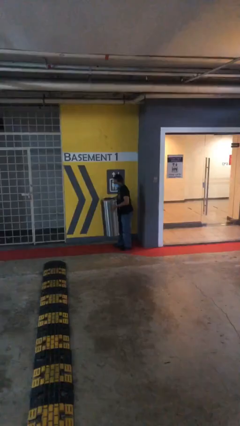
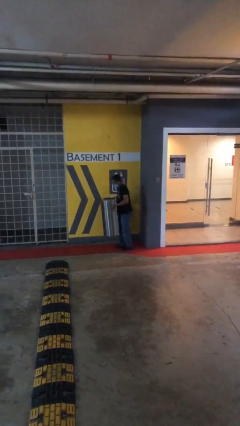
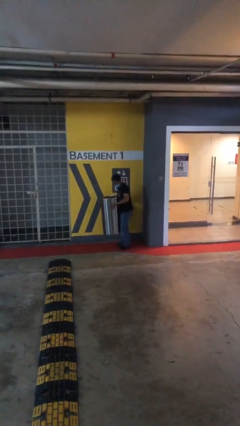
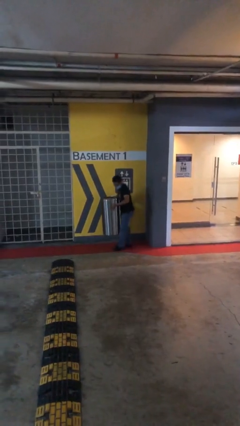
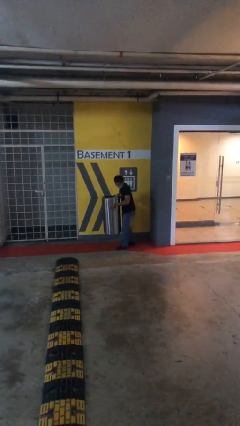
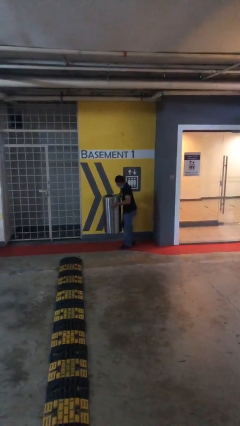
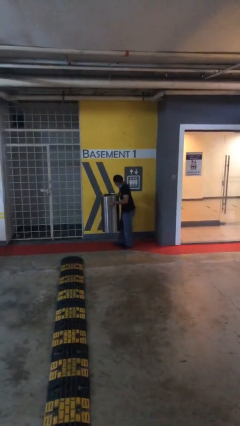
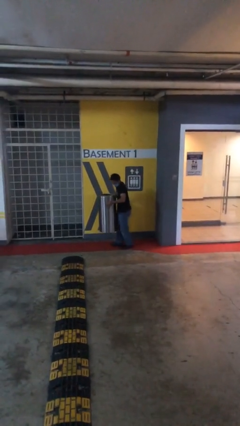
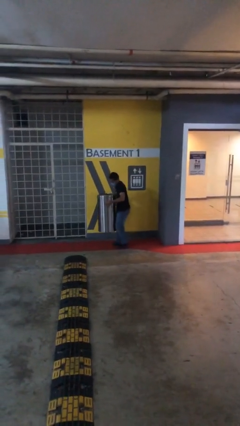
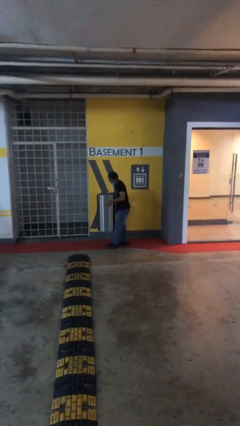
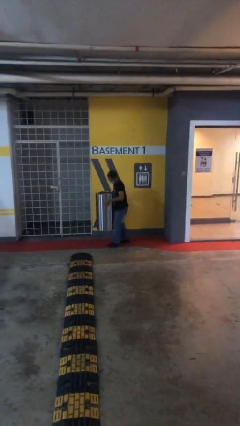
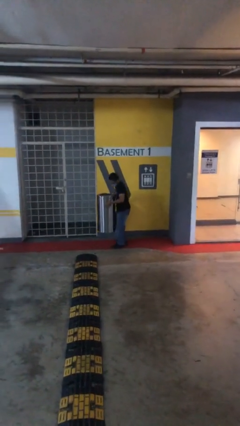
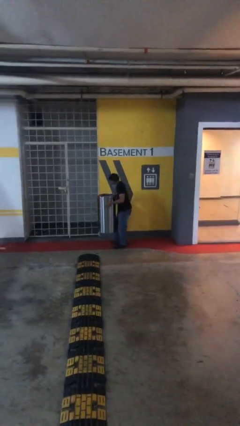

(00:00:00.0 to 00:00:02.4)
person carries heavy object

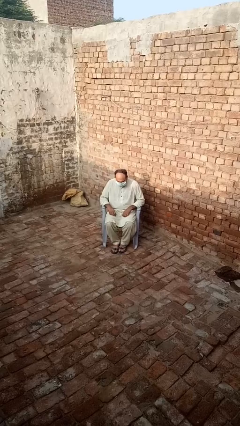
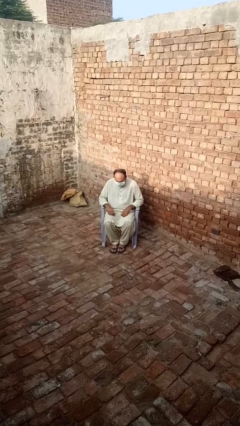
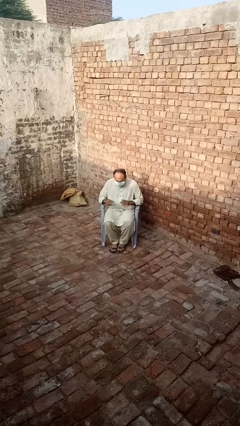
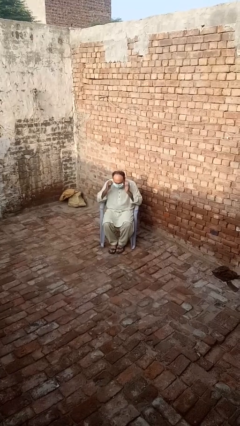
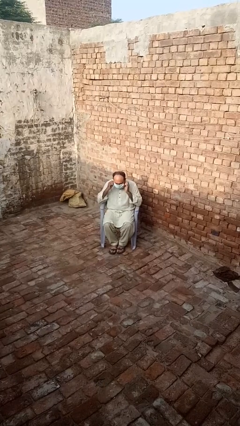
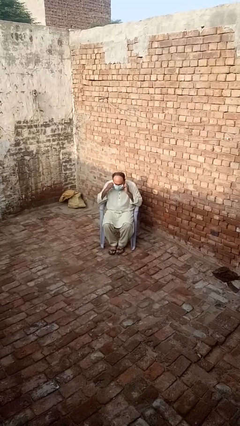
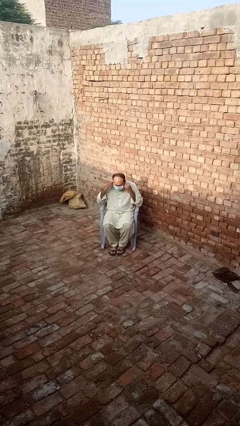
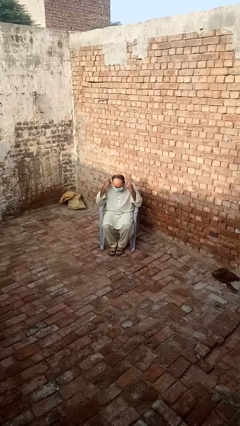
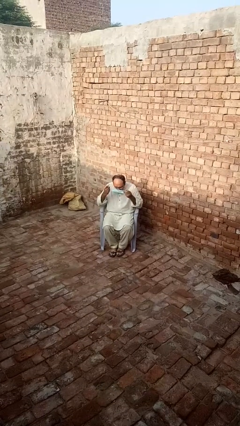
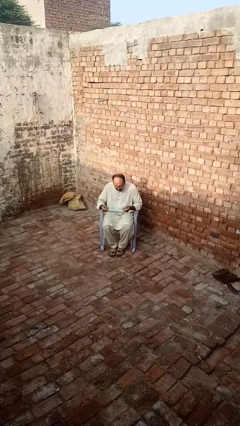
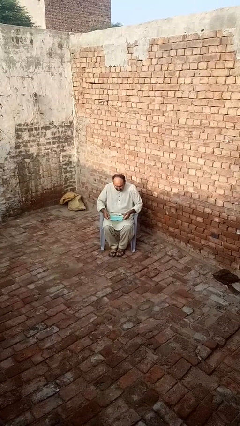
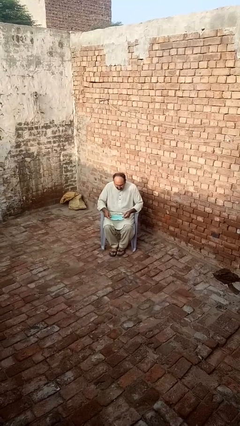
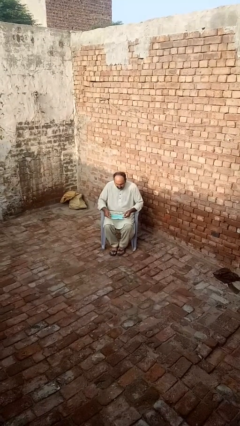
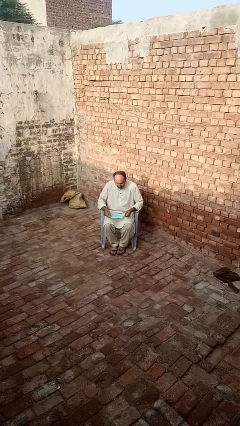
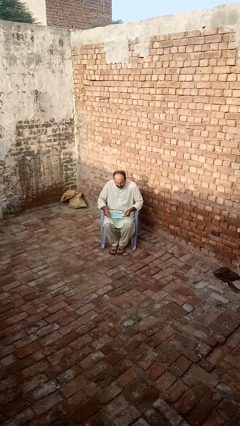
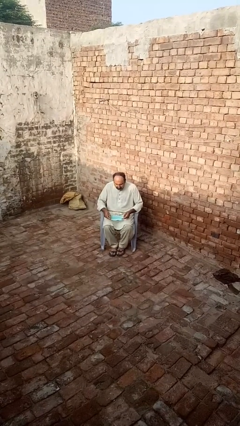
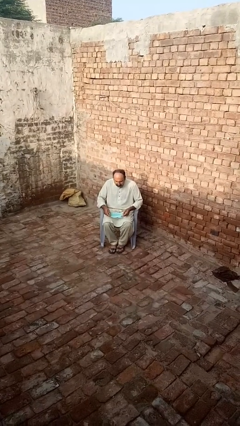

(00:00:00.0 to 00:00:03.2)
person takes off facemask

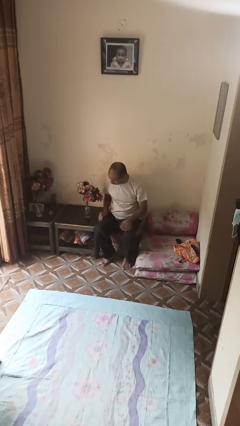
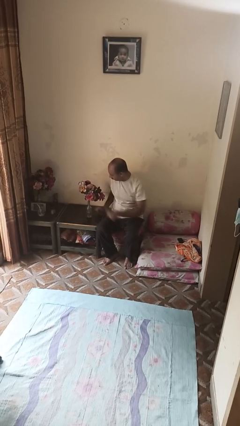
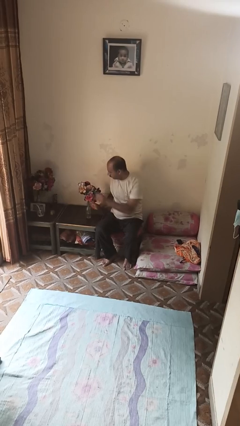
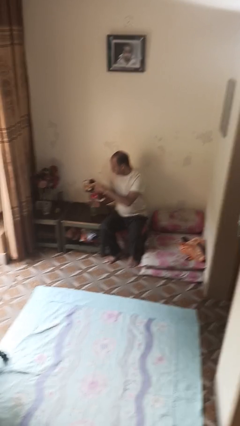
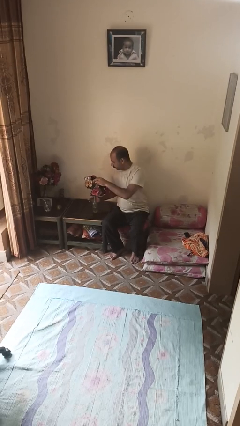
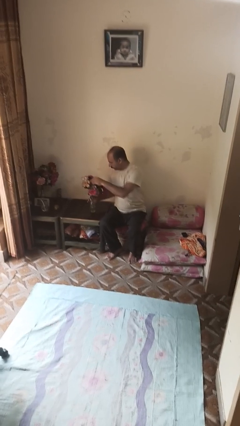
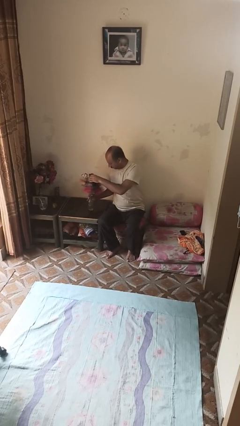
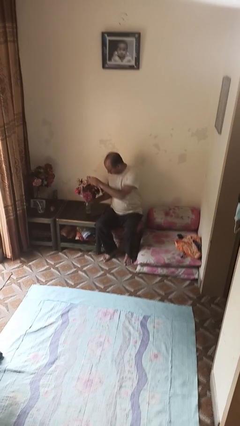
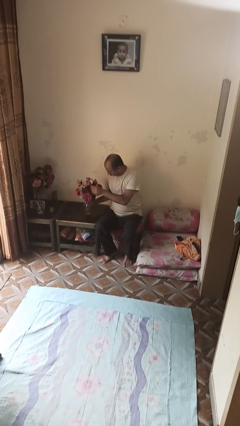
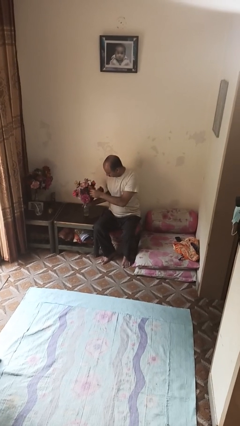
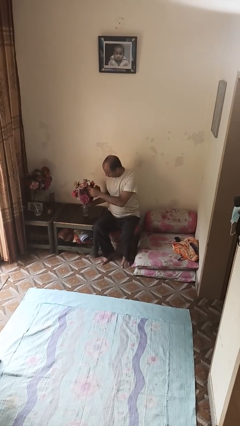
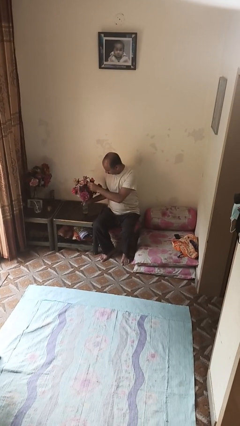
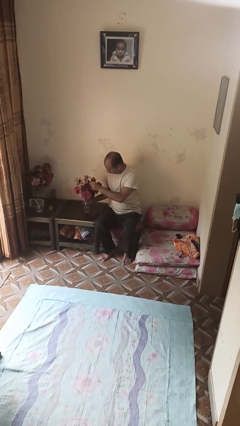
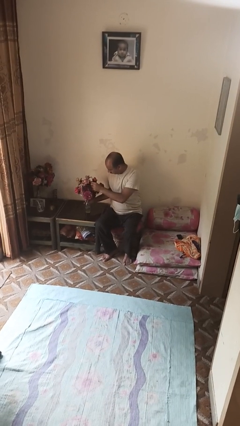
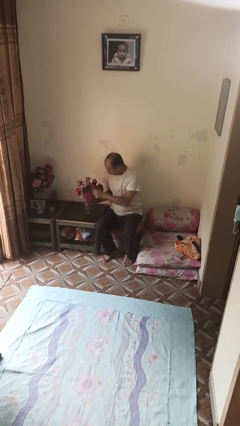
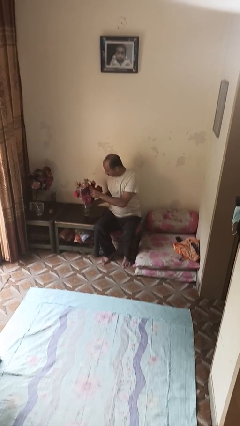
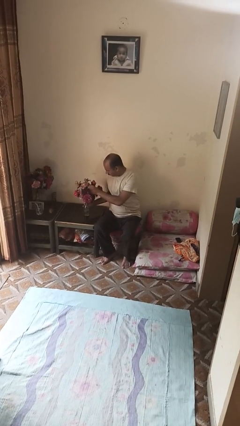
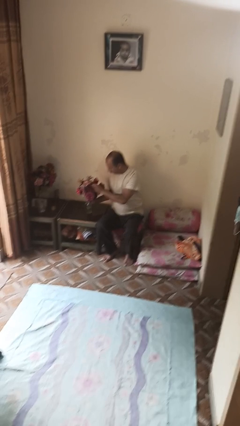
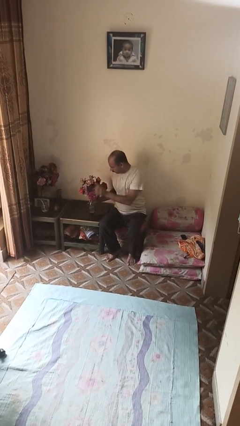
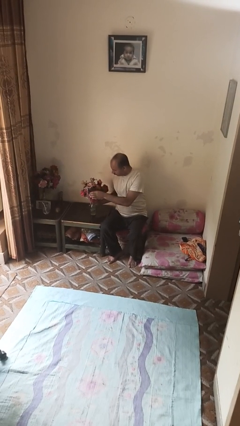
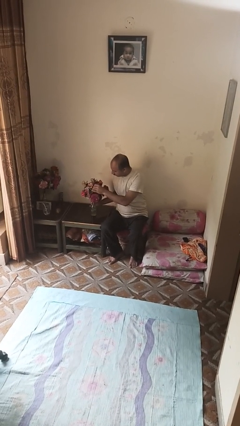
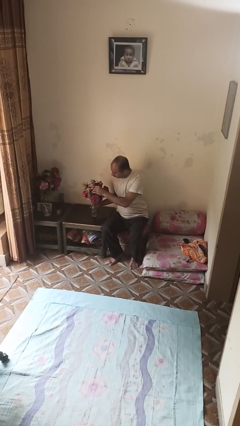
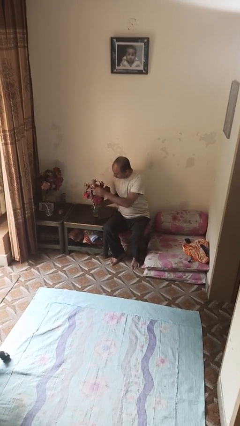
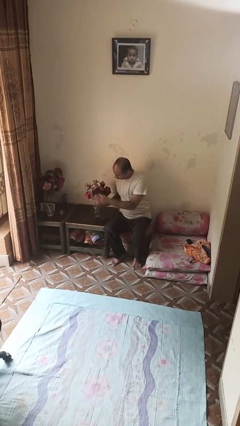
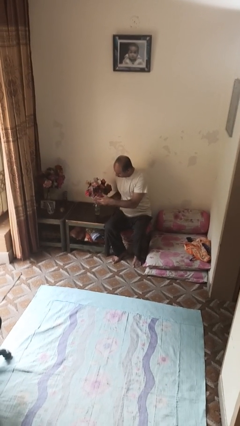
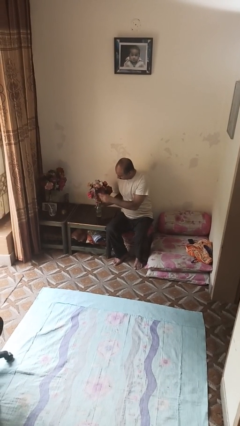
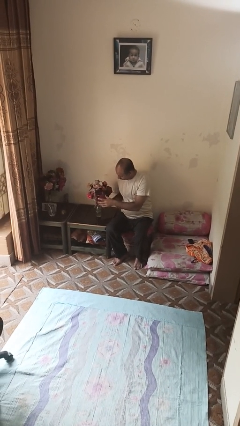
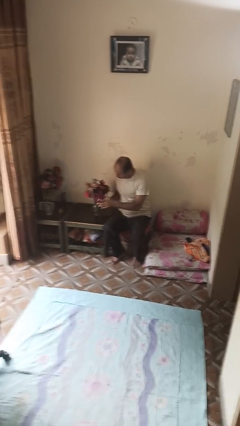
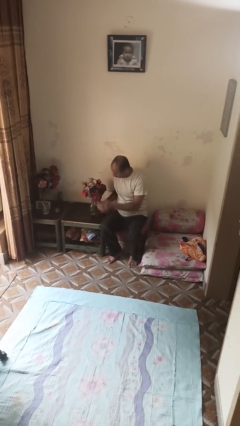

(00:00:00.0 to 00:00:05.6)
person arranges flowers in vase

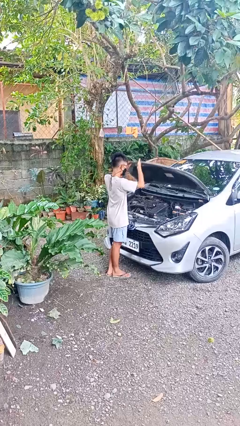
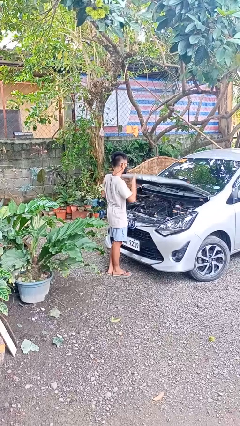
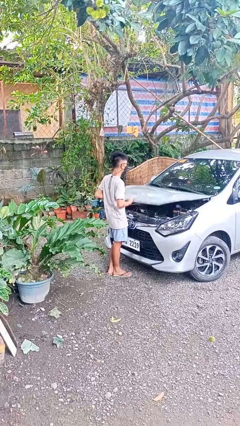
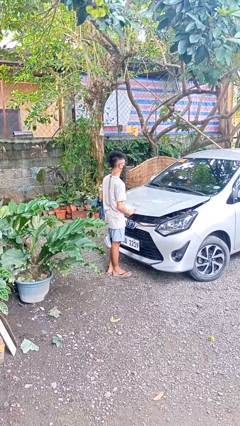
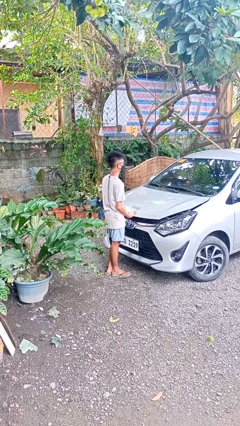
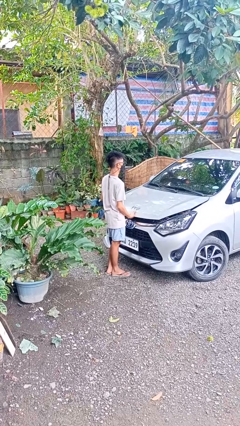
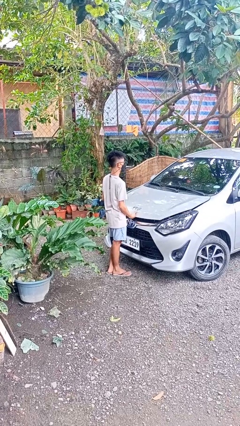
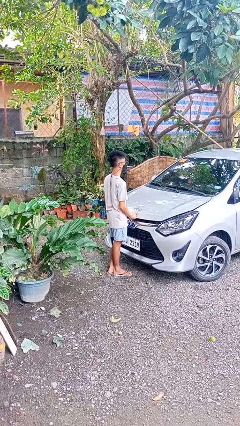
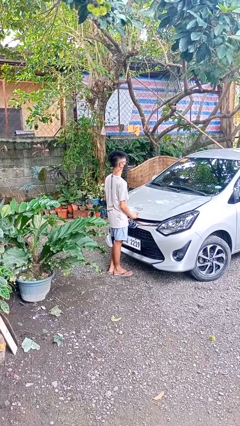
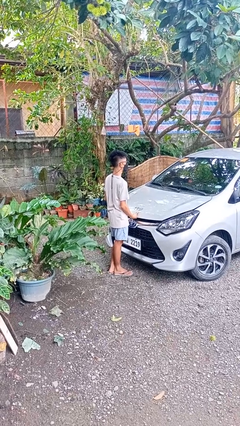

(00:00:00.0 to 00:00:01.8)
person closes car hood

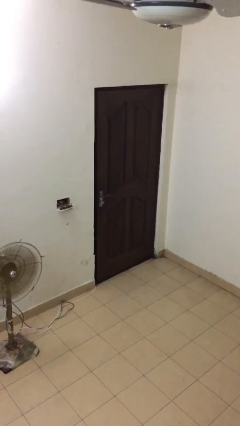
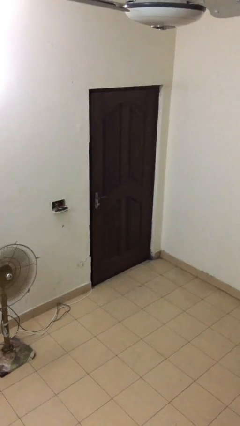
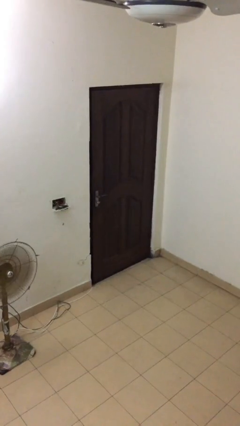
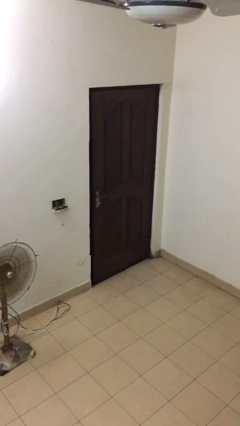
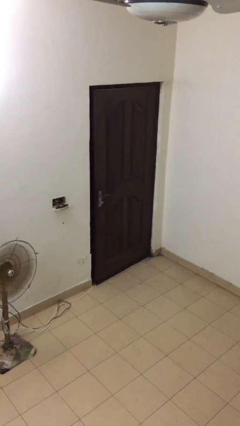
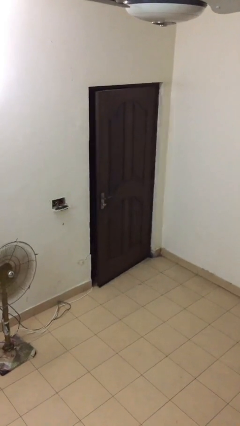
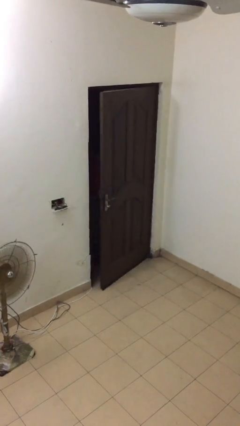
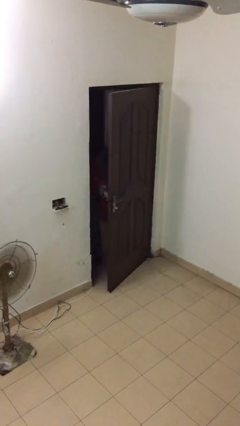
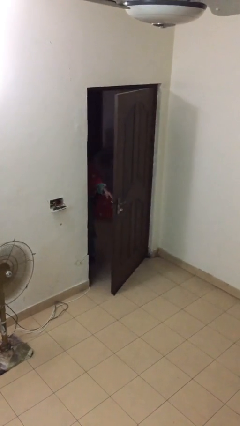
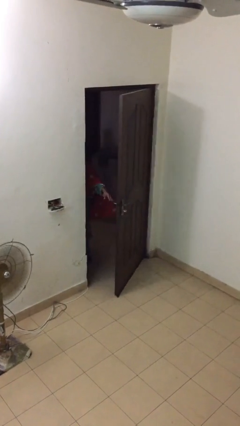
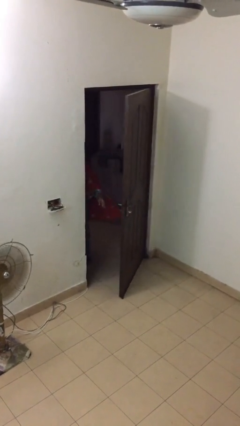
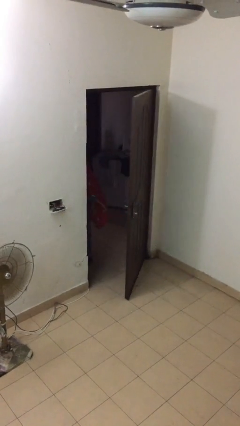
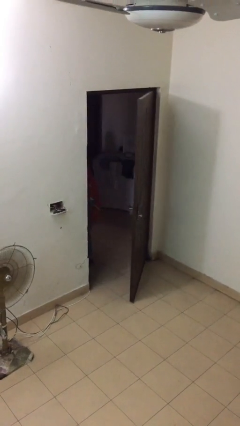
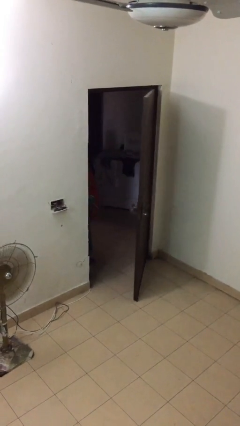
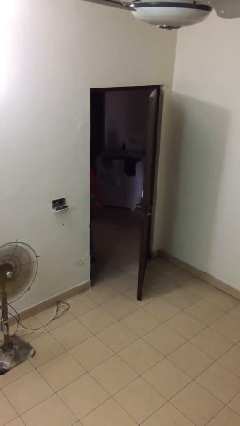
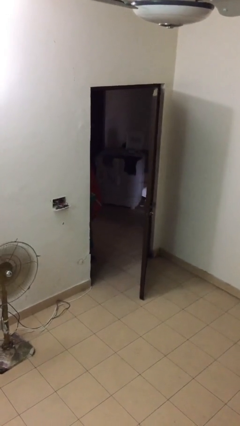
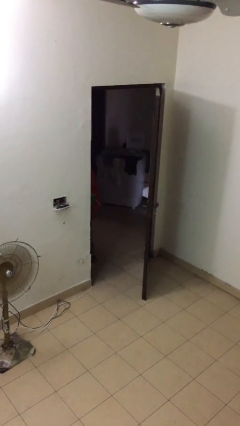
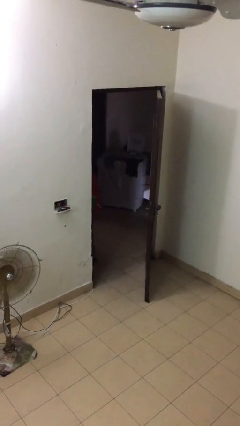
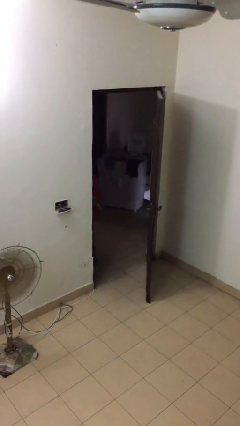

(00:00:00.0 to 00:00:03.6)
person opens facility door

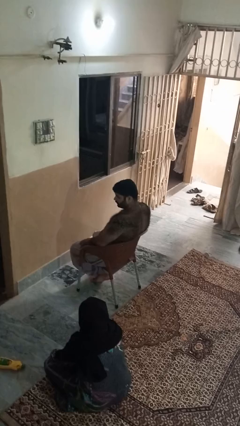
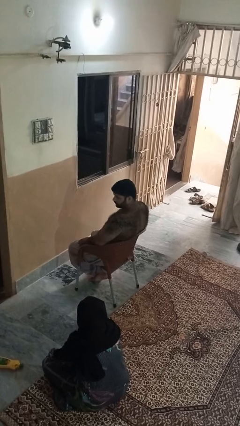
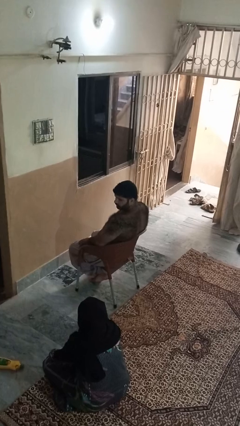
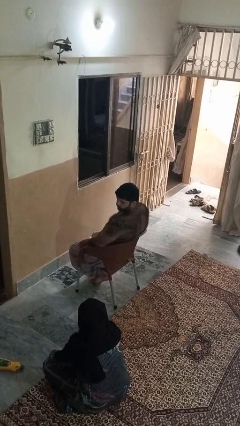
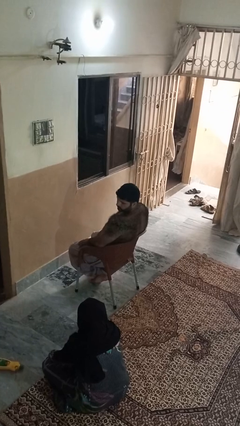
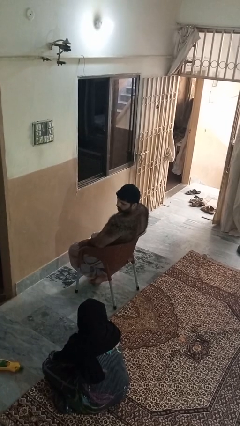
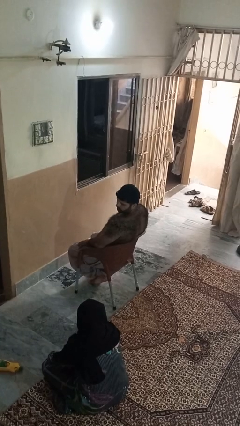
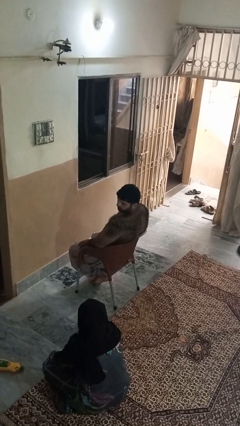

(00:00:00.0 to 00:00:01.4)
person looks over shoulder
